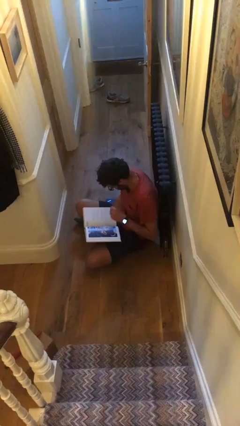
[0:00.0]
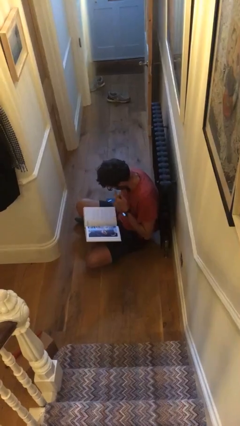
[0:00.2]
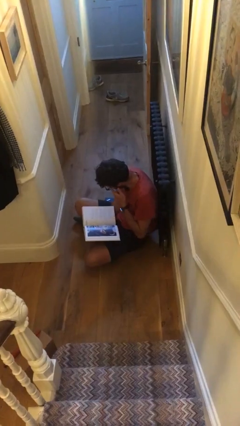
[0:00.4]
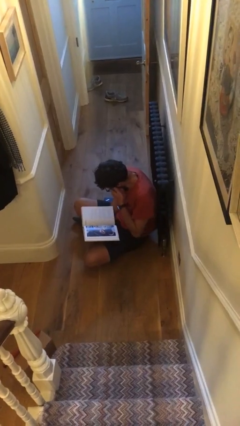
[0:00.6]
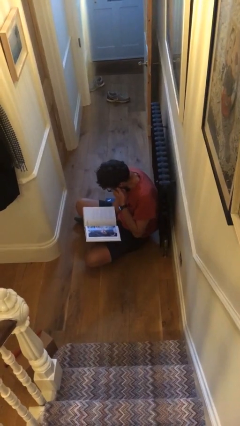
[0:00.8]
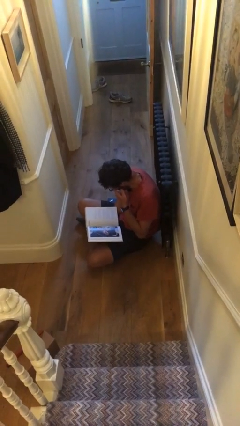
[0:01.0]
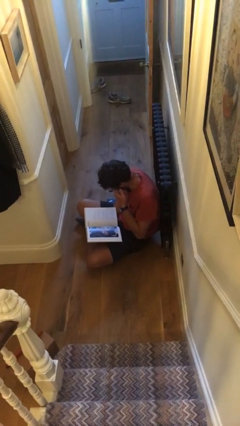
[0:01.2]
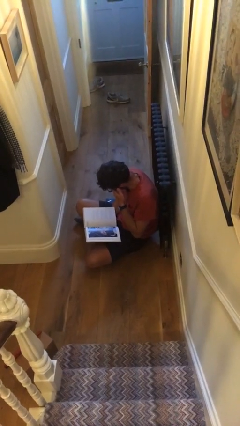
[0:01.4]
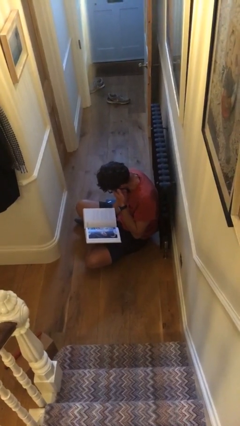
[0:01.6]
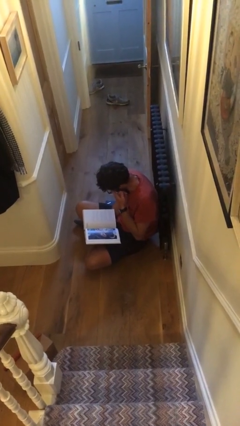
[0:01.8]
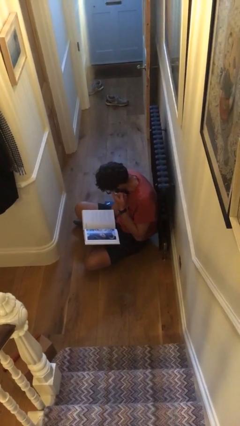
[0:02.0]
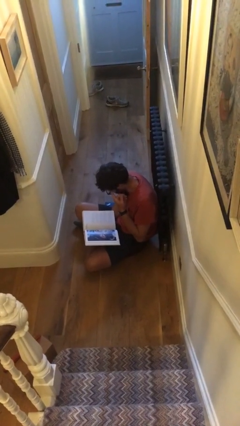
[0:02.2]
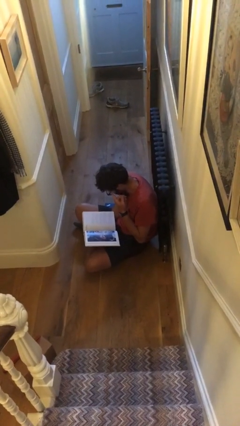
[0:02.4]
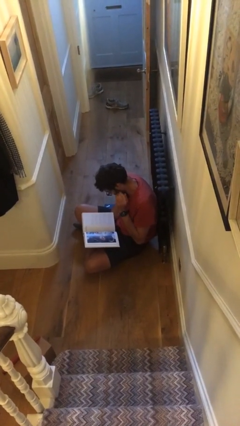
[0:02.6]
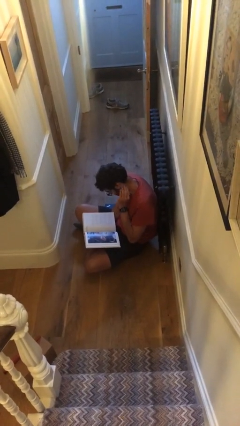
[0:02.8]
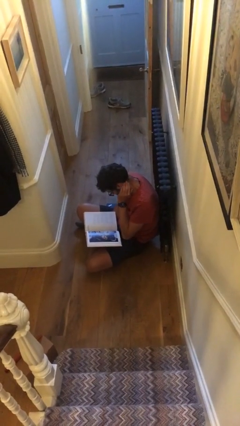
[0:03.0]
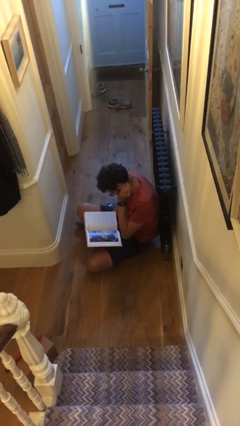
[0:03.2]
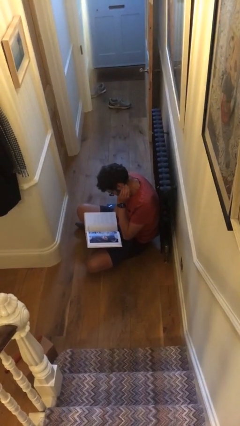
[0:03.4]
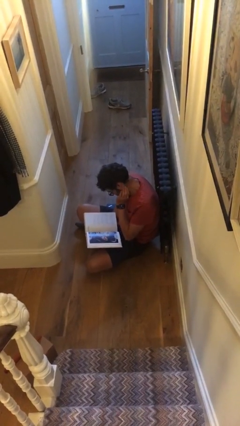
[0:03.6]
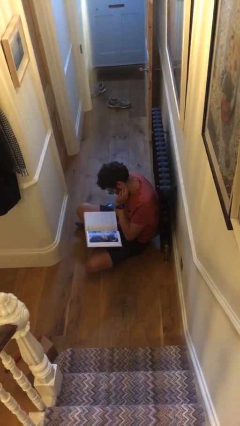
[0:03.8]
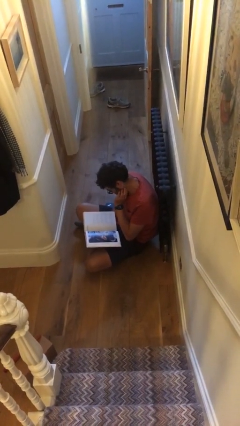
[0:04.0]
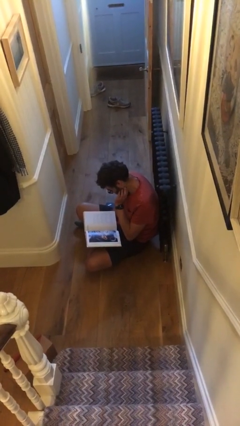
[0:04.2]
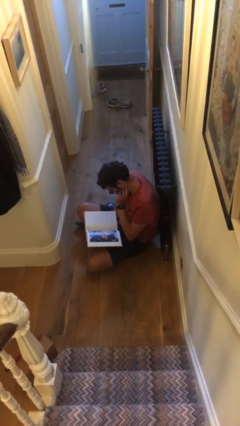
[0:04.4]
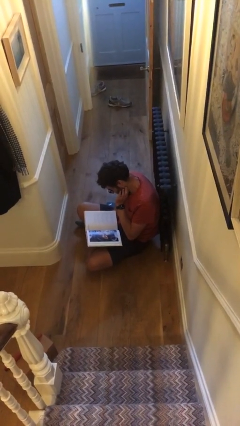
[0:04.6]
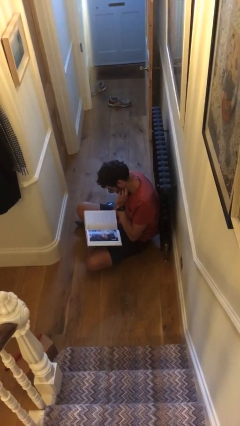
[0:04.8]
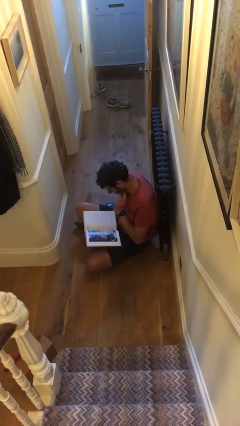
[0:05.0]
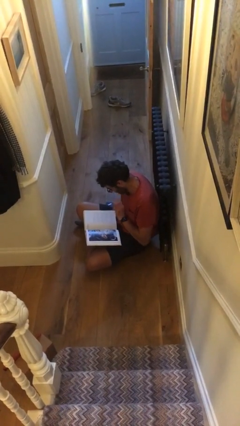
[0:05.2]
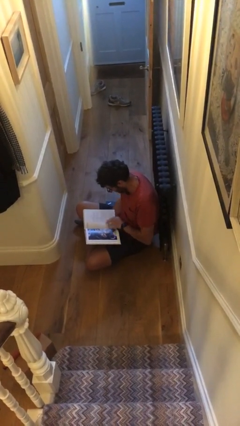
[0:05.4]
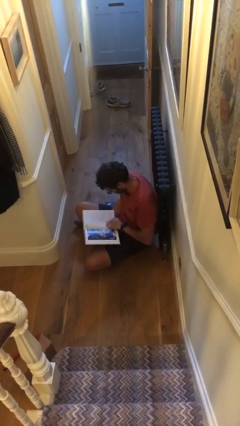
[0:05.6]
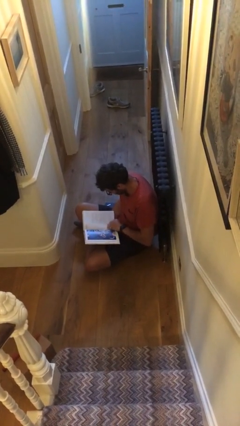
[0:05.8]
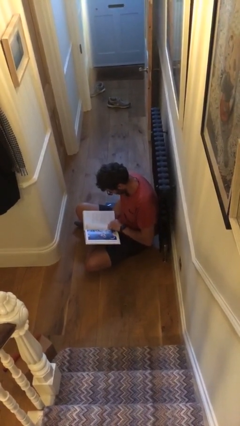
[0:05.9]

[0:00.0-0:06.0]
person reads document

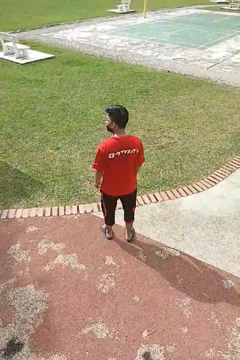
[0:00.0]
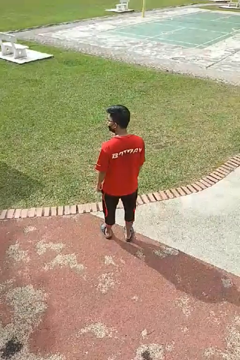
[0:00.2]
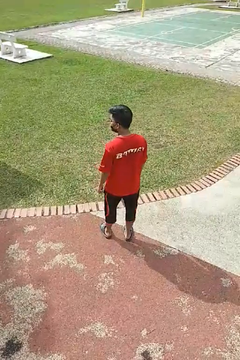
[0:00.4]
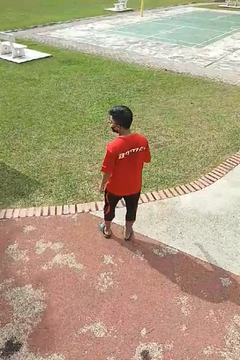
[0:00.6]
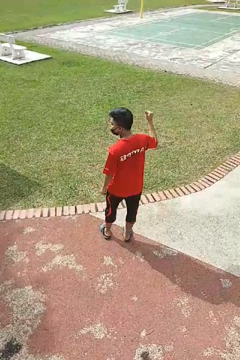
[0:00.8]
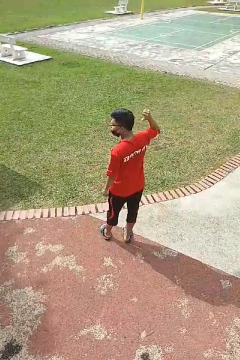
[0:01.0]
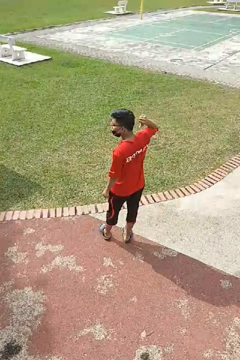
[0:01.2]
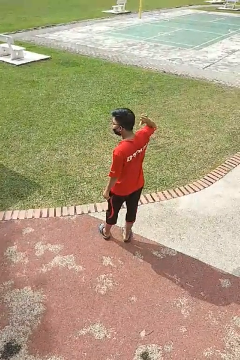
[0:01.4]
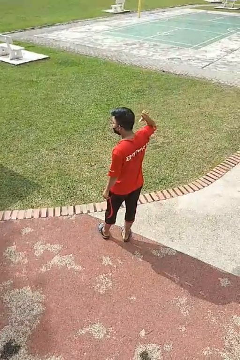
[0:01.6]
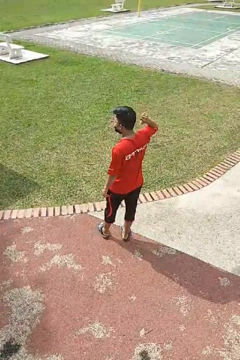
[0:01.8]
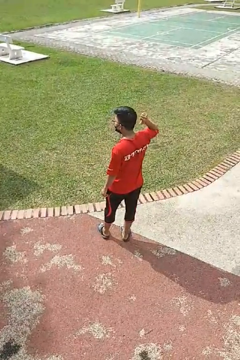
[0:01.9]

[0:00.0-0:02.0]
person gestures behind me

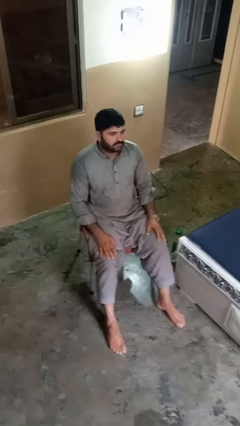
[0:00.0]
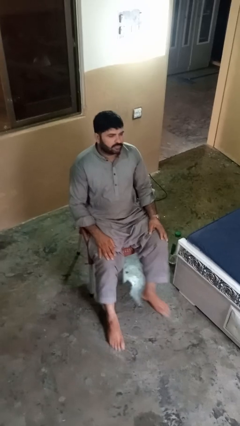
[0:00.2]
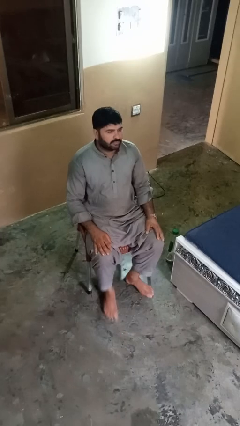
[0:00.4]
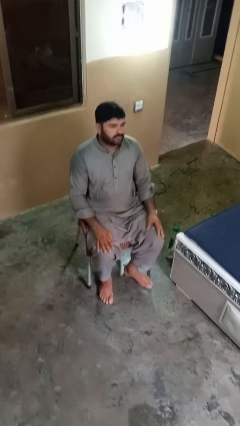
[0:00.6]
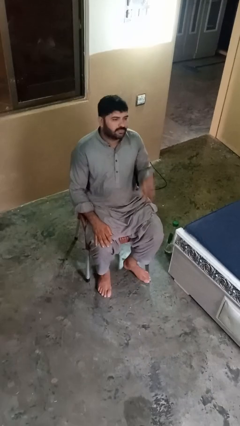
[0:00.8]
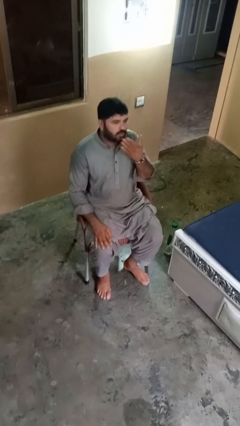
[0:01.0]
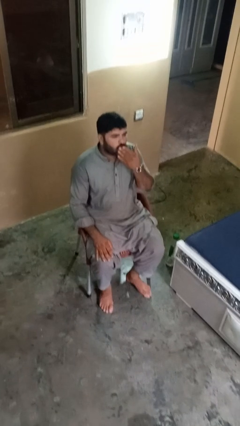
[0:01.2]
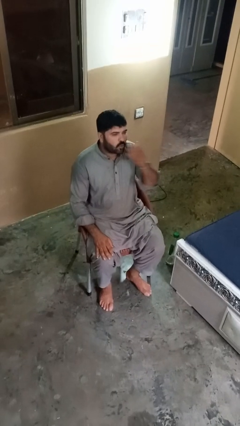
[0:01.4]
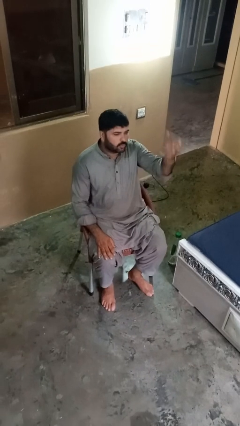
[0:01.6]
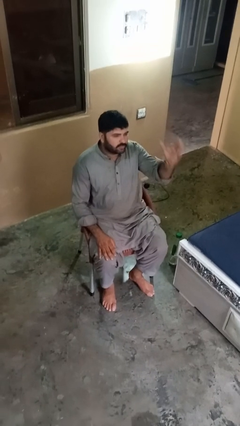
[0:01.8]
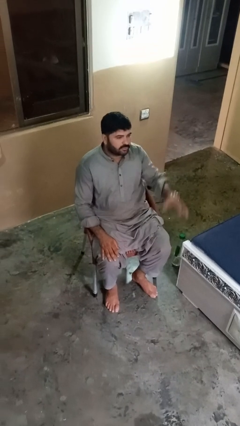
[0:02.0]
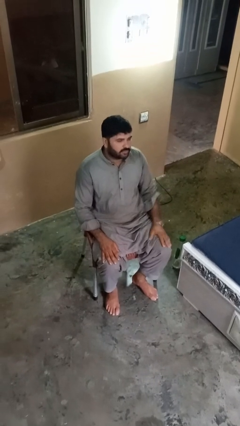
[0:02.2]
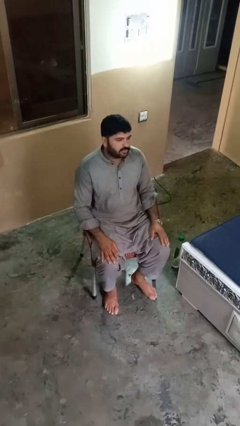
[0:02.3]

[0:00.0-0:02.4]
person gestures blow kiss

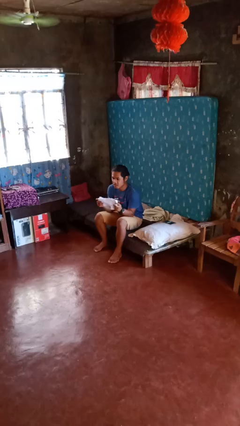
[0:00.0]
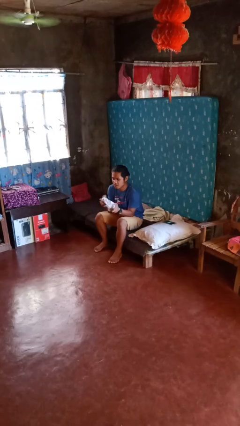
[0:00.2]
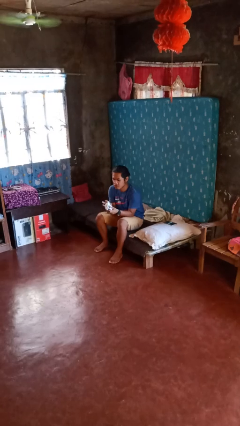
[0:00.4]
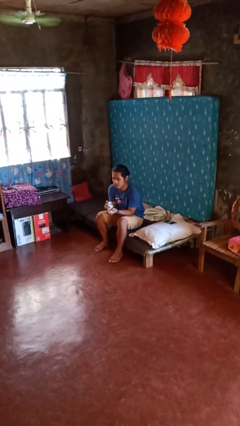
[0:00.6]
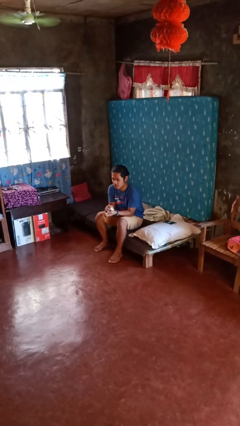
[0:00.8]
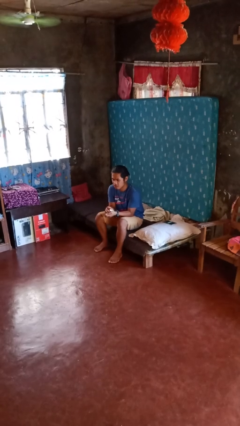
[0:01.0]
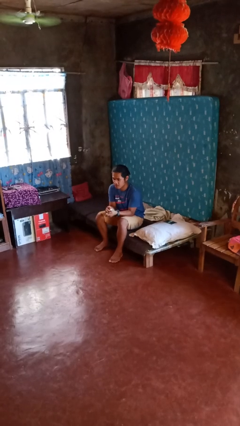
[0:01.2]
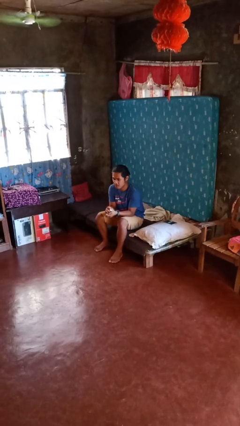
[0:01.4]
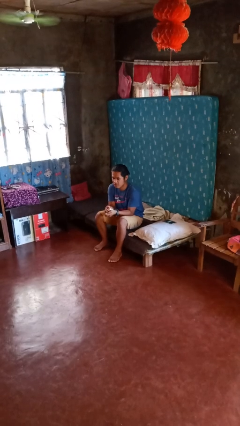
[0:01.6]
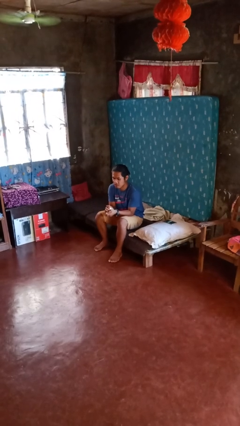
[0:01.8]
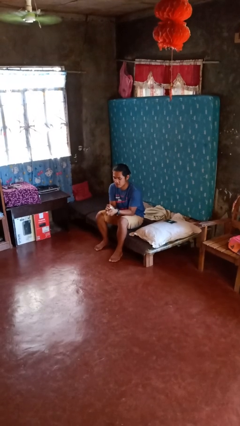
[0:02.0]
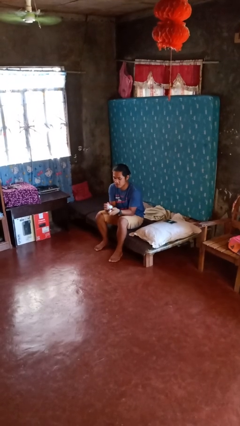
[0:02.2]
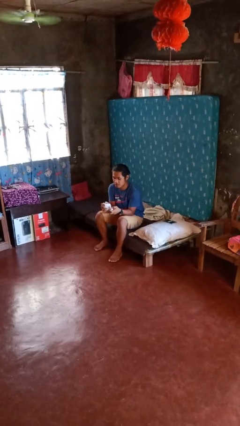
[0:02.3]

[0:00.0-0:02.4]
person crumples paper

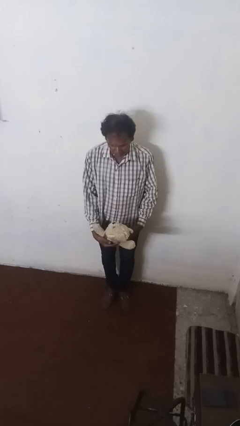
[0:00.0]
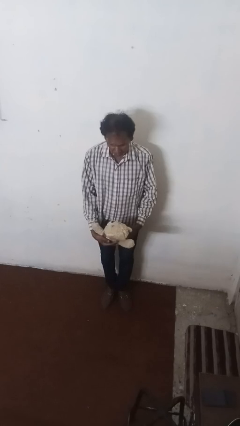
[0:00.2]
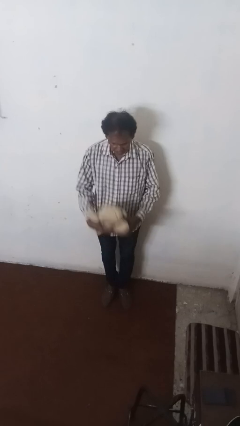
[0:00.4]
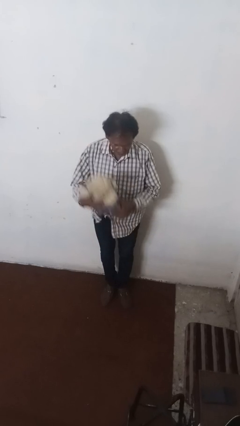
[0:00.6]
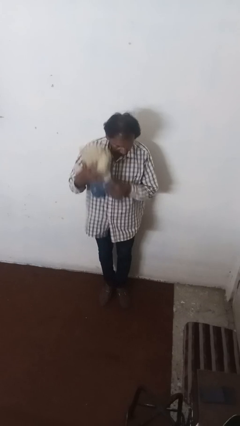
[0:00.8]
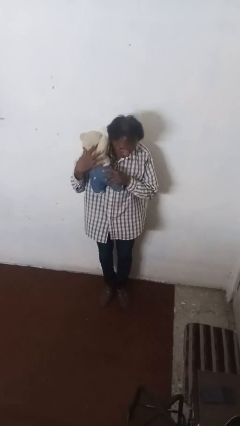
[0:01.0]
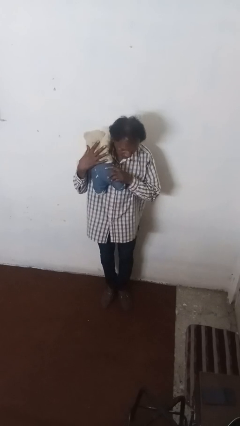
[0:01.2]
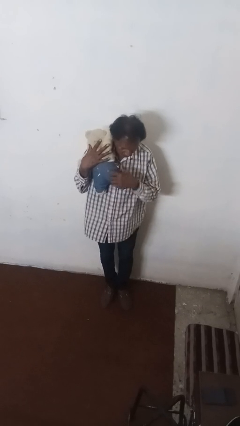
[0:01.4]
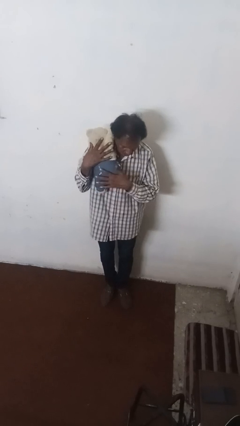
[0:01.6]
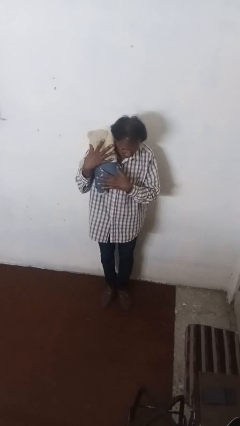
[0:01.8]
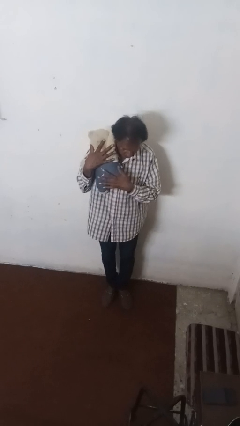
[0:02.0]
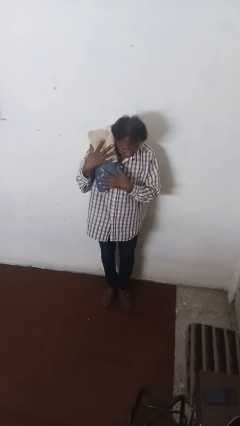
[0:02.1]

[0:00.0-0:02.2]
person hugs stuffed animal

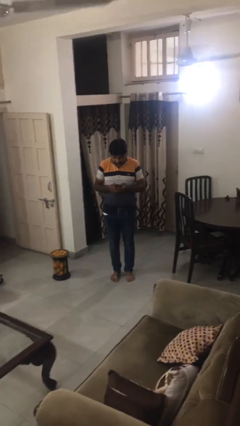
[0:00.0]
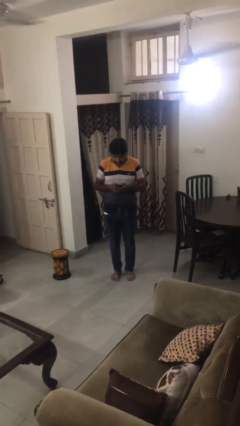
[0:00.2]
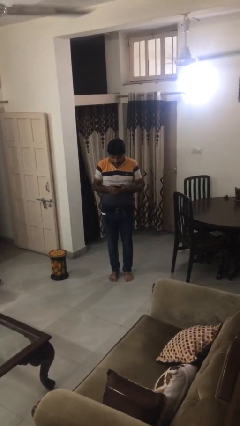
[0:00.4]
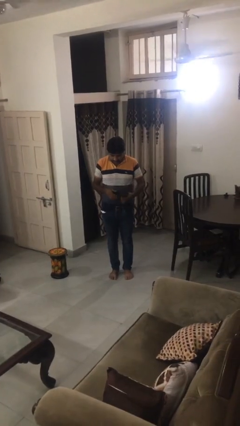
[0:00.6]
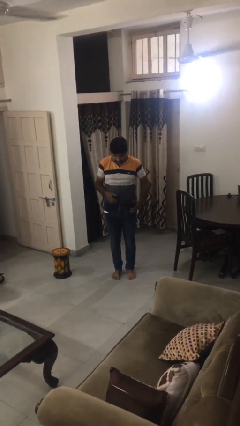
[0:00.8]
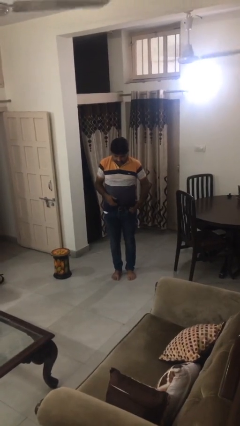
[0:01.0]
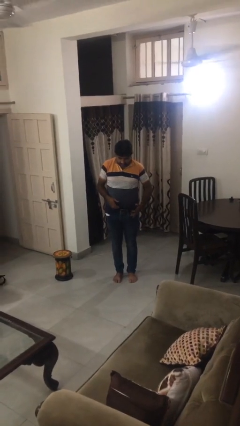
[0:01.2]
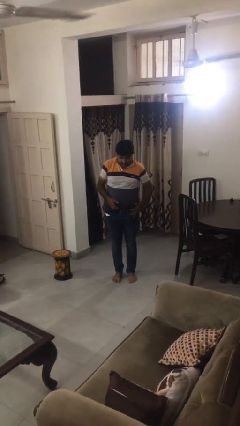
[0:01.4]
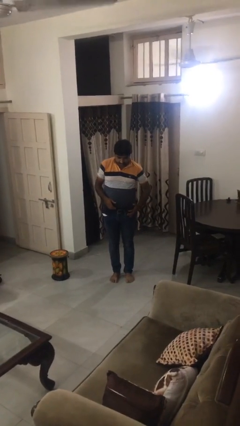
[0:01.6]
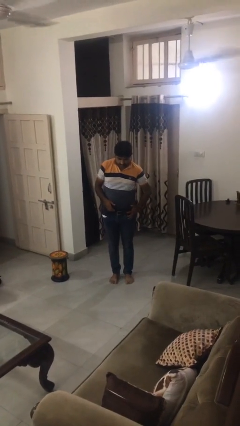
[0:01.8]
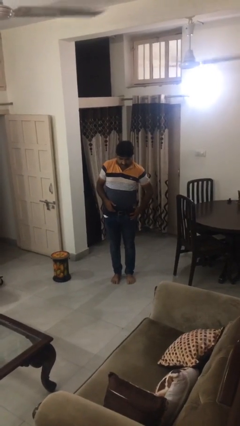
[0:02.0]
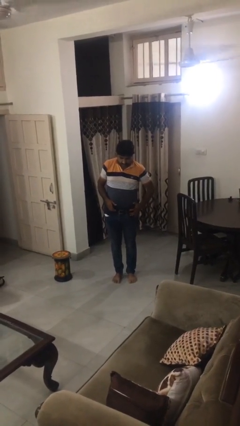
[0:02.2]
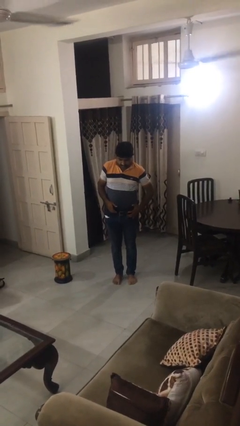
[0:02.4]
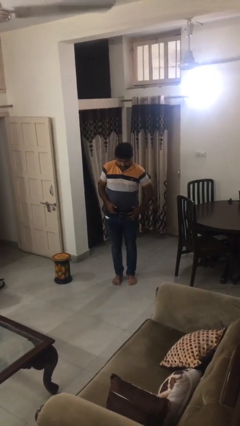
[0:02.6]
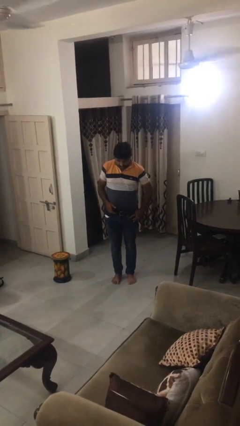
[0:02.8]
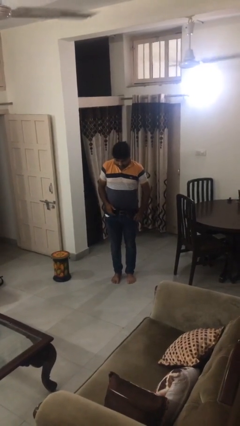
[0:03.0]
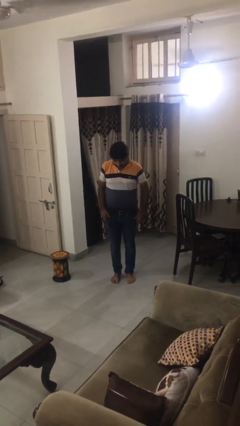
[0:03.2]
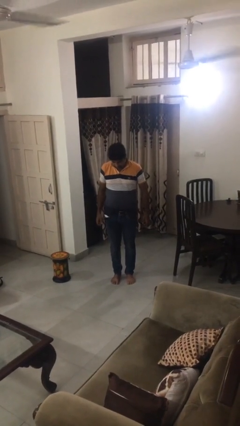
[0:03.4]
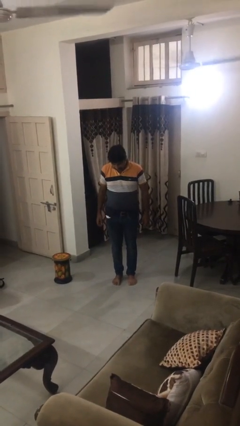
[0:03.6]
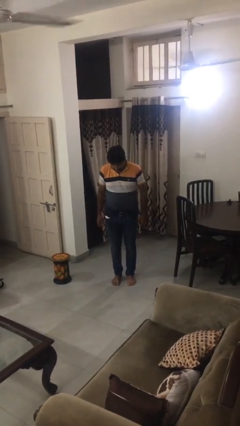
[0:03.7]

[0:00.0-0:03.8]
person puts phone into pocket
